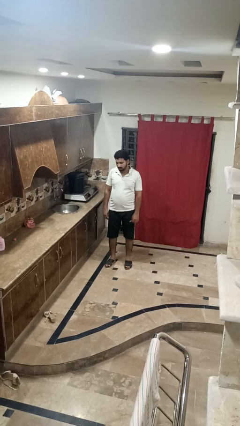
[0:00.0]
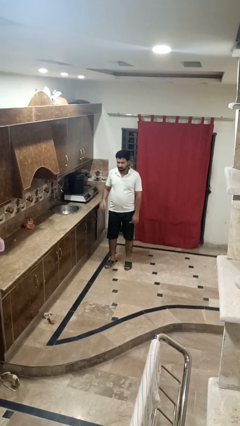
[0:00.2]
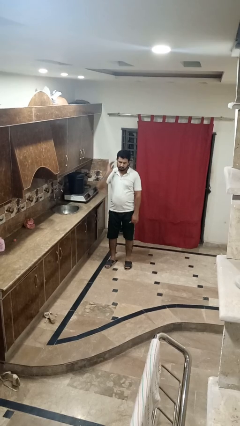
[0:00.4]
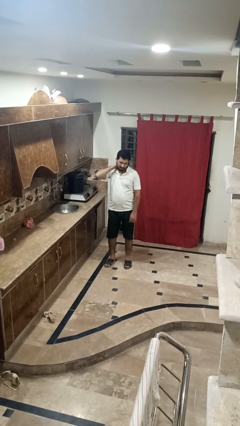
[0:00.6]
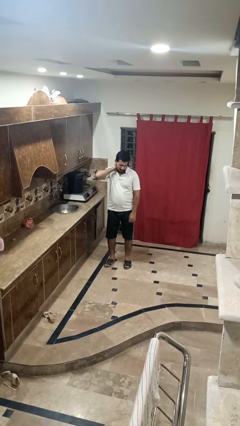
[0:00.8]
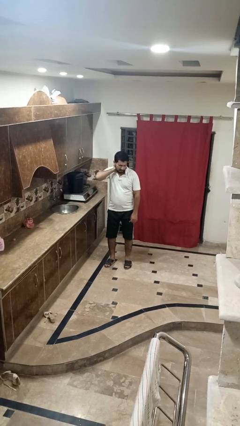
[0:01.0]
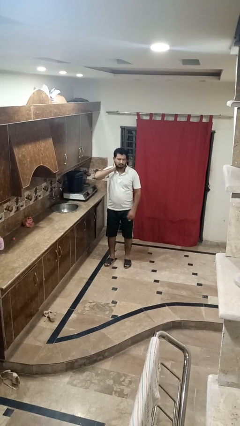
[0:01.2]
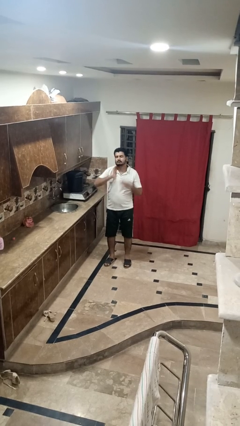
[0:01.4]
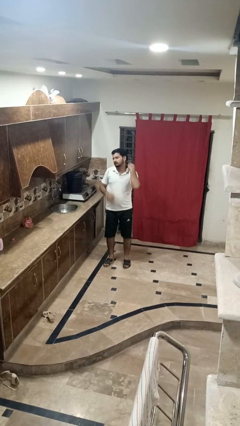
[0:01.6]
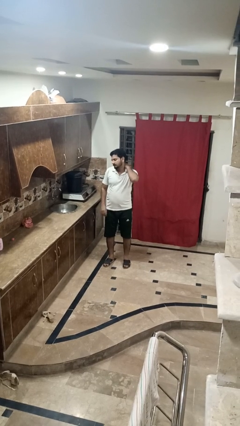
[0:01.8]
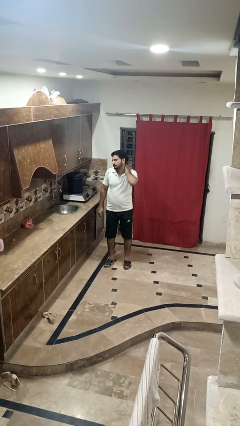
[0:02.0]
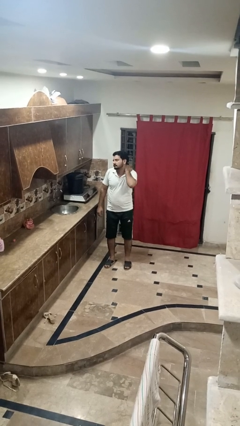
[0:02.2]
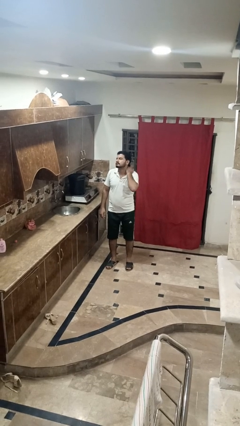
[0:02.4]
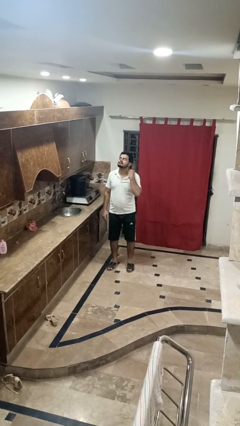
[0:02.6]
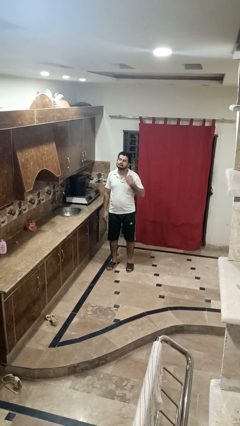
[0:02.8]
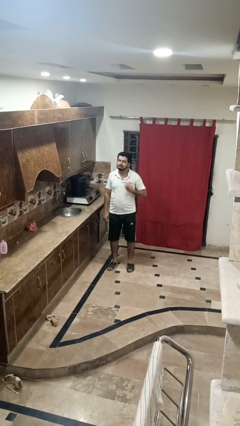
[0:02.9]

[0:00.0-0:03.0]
person rubs neck

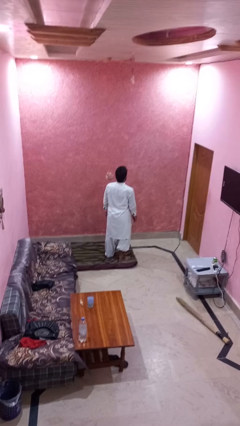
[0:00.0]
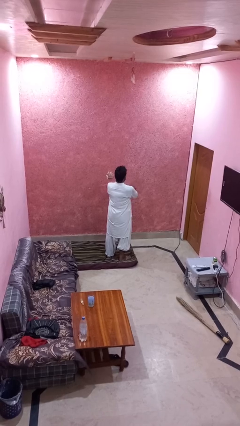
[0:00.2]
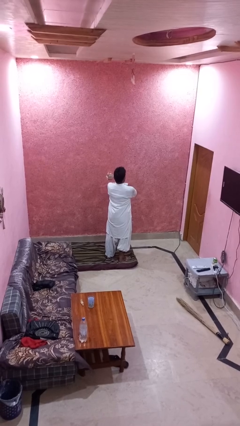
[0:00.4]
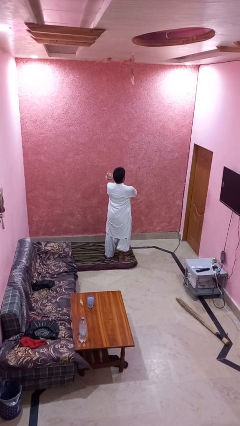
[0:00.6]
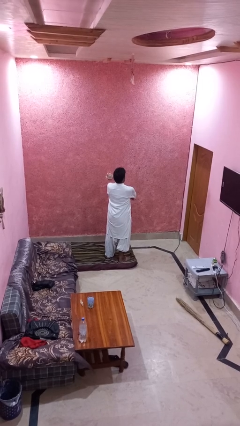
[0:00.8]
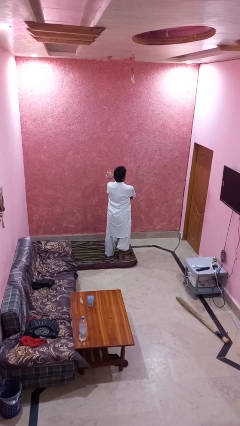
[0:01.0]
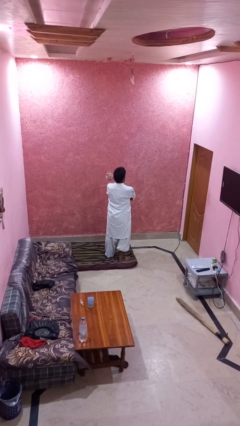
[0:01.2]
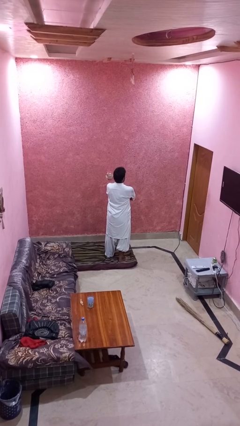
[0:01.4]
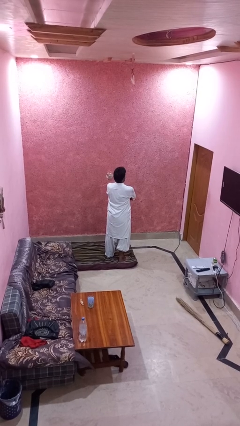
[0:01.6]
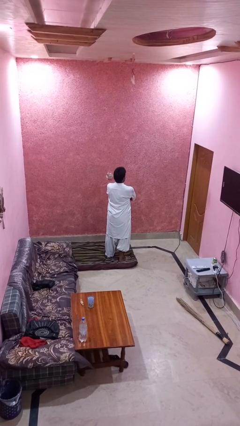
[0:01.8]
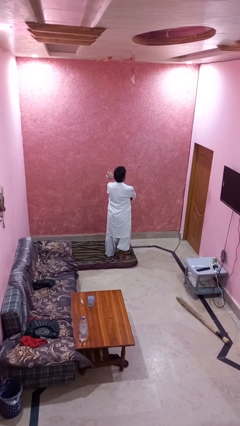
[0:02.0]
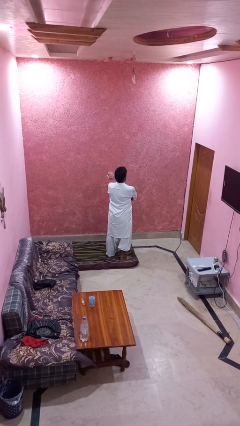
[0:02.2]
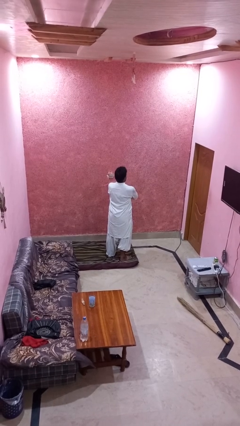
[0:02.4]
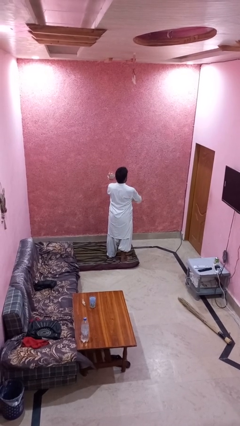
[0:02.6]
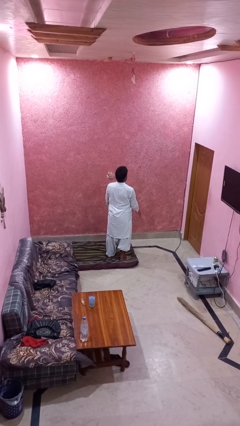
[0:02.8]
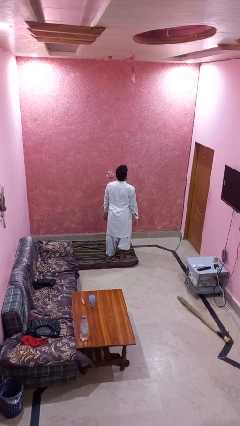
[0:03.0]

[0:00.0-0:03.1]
person crosses arms

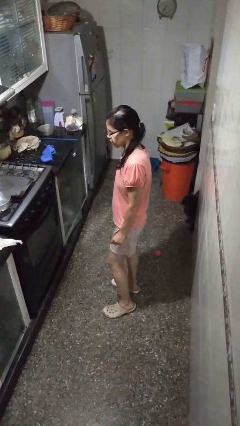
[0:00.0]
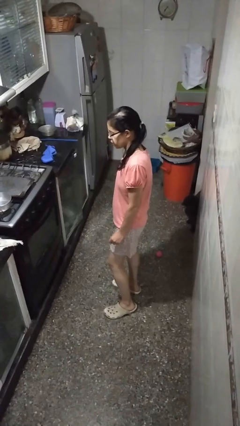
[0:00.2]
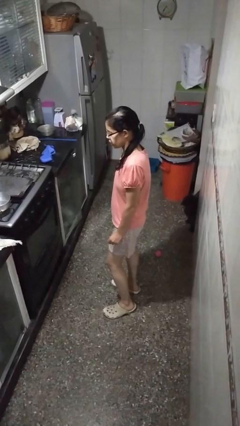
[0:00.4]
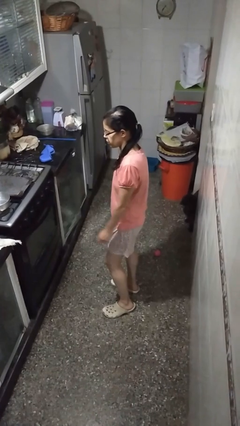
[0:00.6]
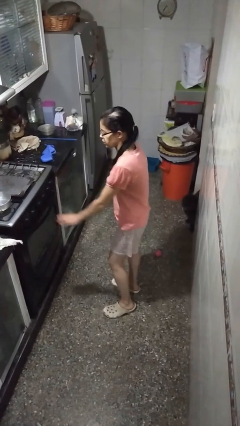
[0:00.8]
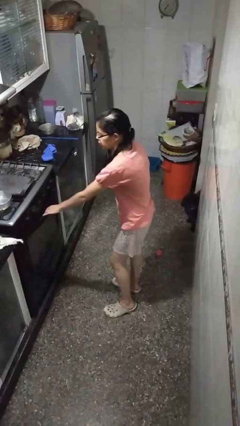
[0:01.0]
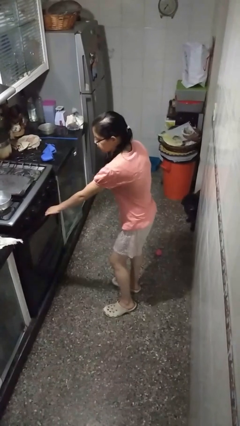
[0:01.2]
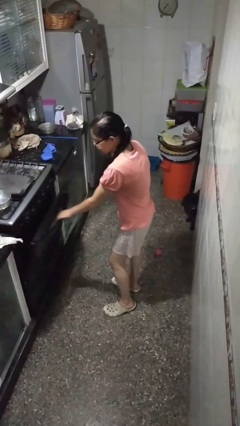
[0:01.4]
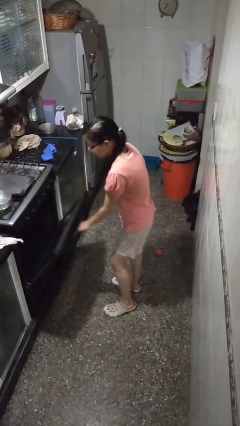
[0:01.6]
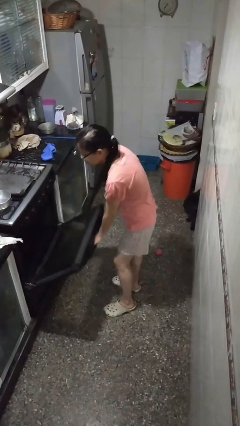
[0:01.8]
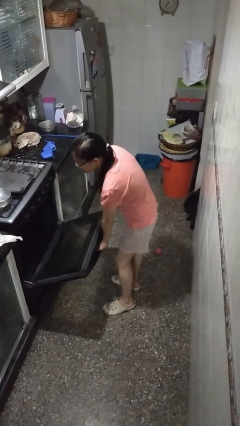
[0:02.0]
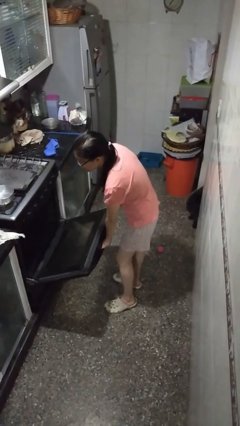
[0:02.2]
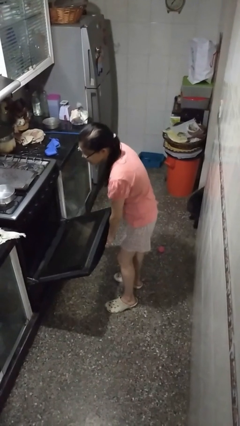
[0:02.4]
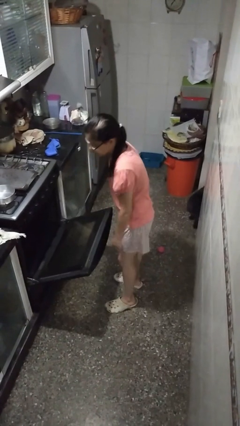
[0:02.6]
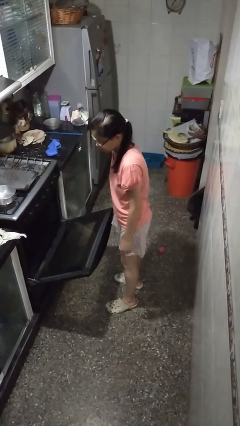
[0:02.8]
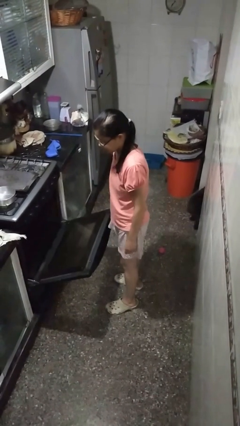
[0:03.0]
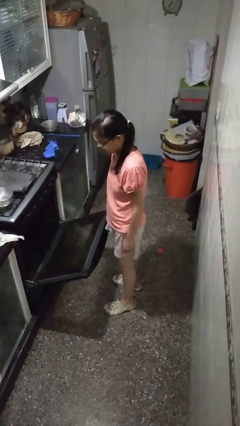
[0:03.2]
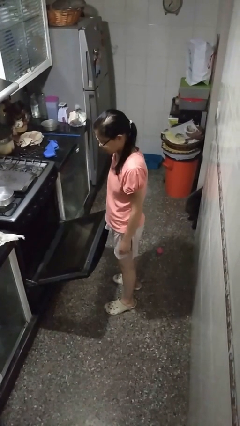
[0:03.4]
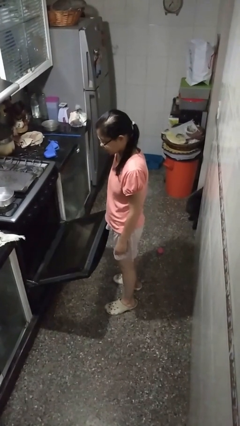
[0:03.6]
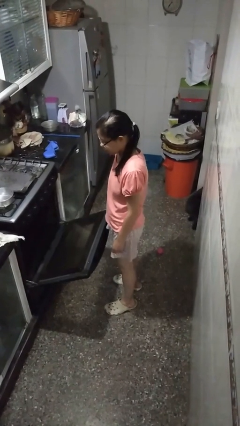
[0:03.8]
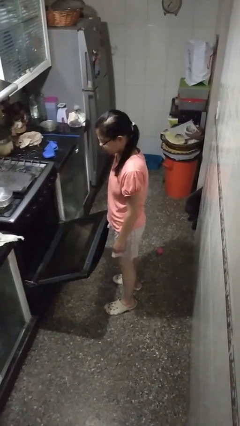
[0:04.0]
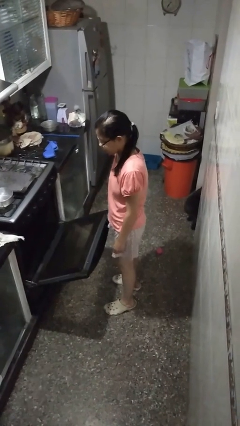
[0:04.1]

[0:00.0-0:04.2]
person opens oven door

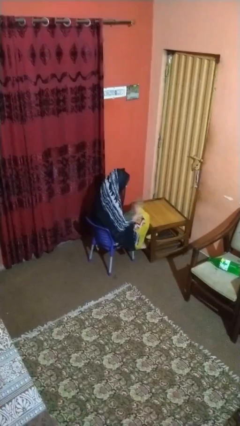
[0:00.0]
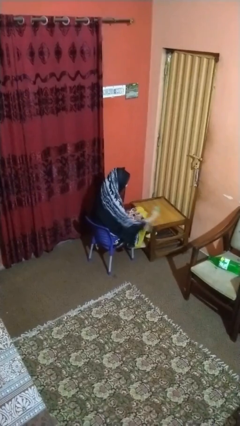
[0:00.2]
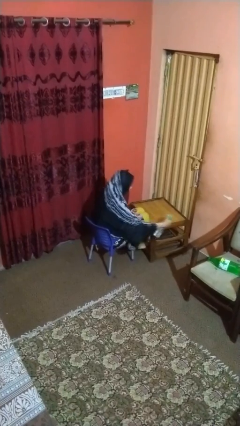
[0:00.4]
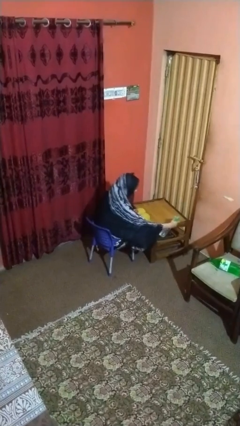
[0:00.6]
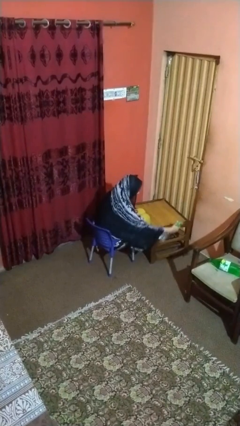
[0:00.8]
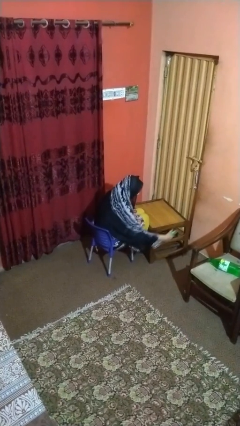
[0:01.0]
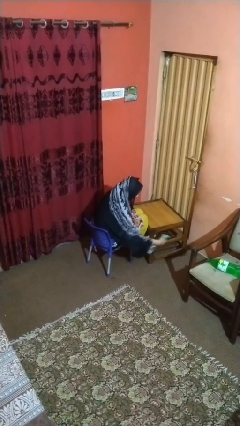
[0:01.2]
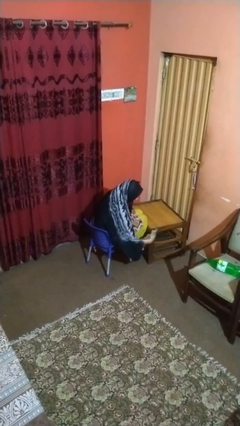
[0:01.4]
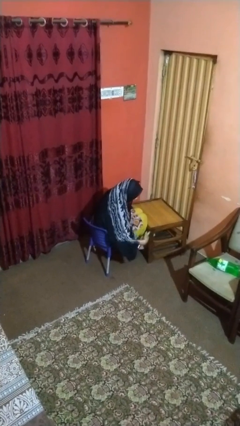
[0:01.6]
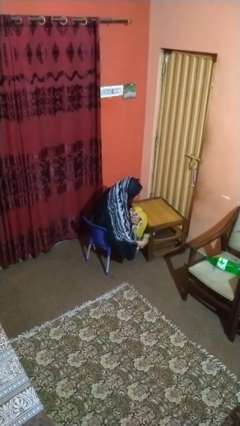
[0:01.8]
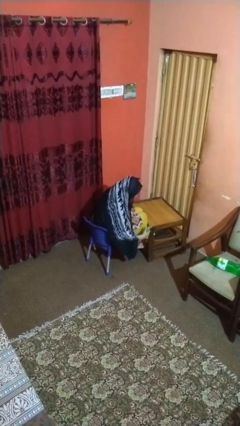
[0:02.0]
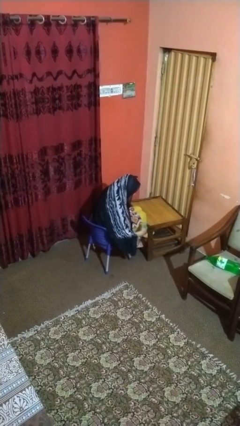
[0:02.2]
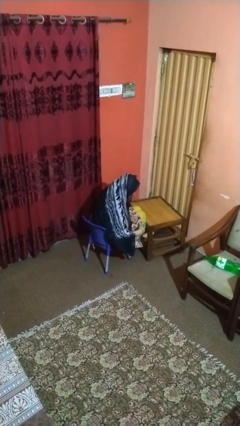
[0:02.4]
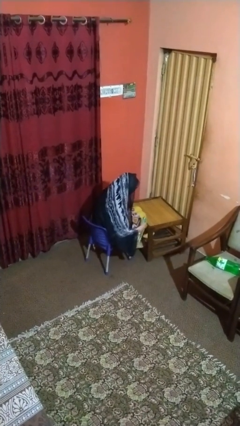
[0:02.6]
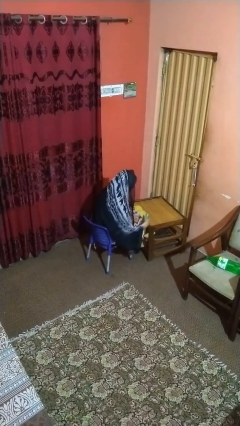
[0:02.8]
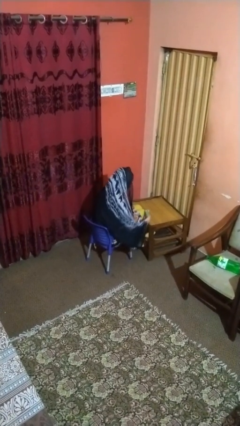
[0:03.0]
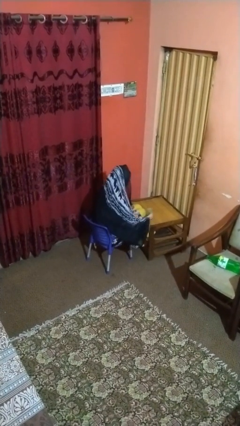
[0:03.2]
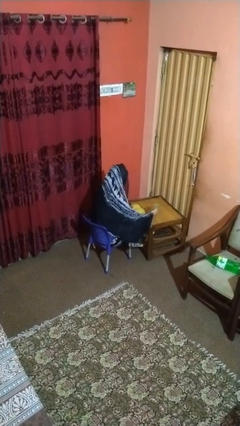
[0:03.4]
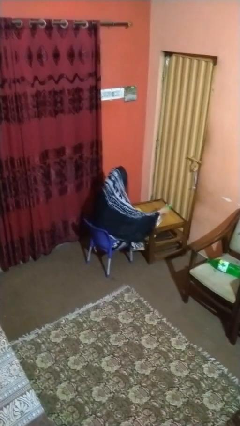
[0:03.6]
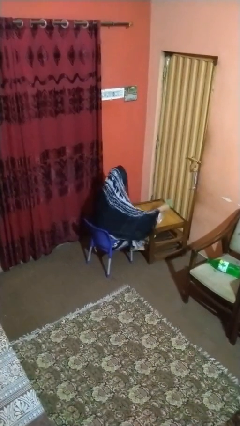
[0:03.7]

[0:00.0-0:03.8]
person sprays from bottle

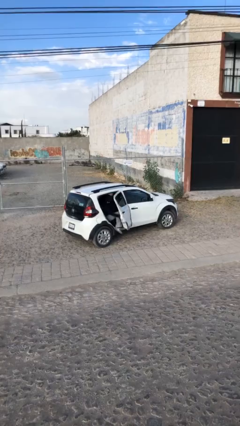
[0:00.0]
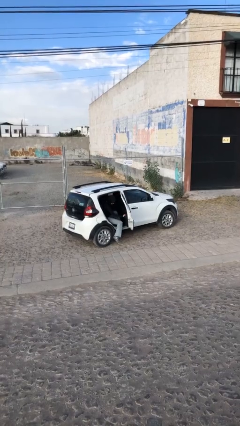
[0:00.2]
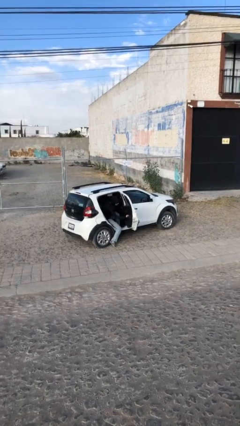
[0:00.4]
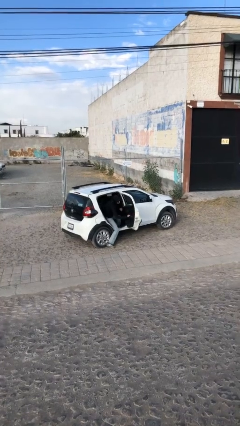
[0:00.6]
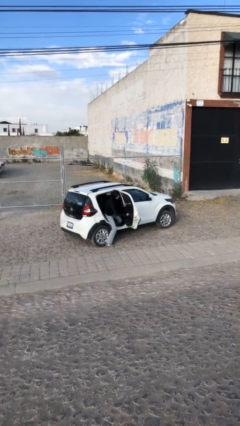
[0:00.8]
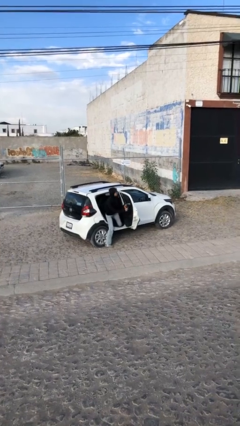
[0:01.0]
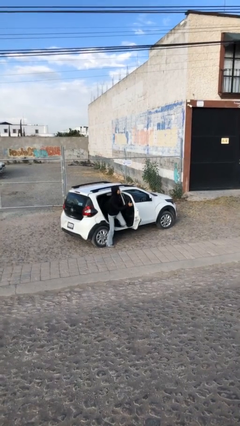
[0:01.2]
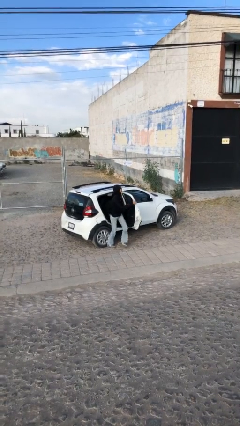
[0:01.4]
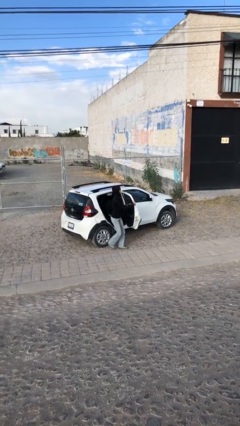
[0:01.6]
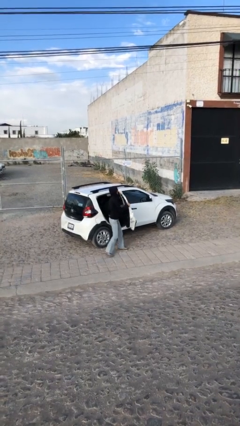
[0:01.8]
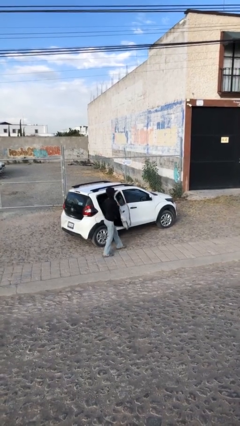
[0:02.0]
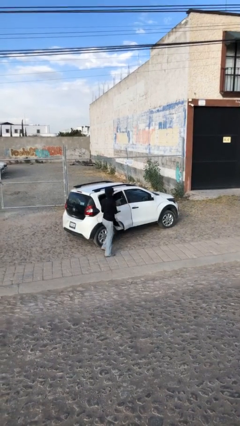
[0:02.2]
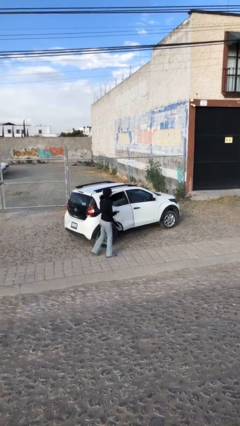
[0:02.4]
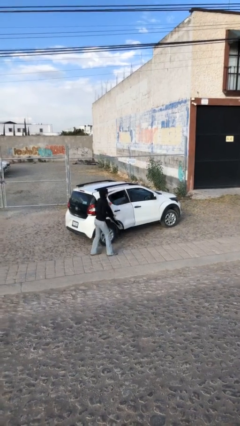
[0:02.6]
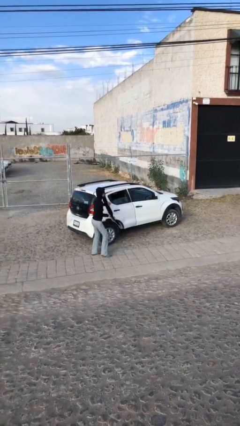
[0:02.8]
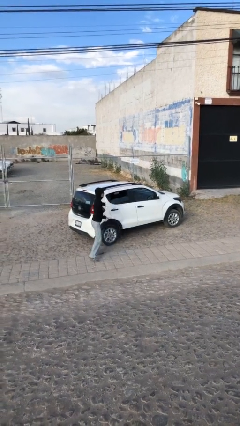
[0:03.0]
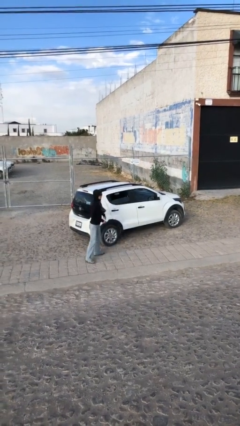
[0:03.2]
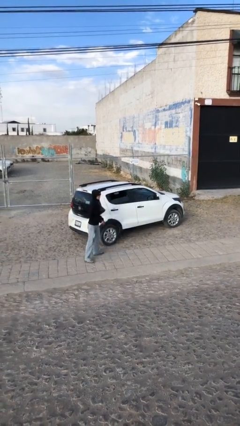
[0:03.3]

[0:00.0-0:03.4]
car drops off person
